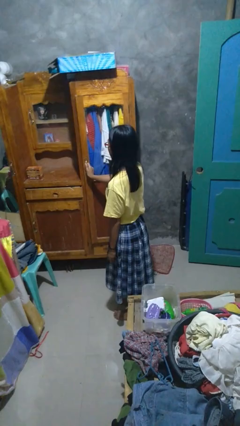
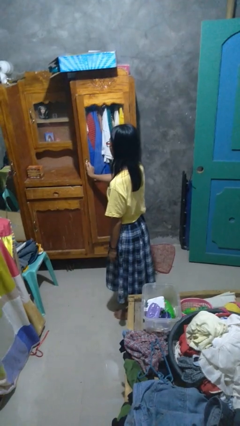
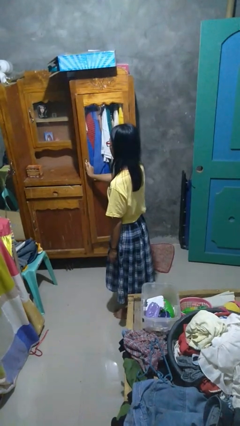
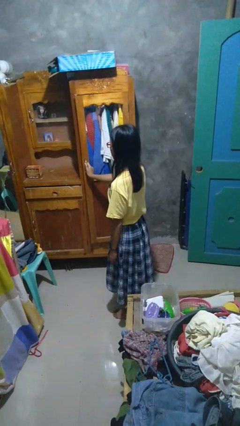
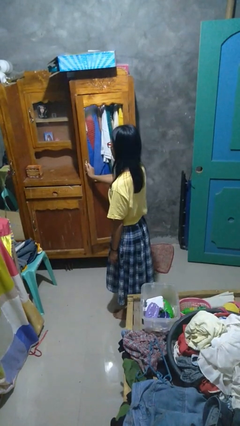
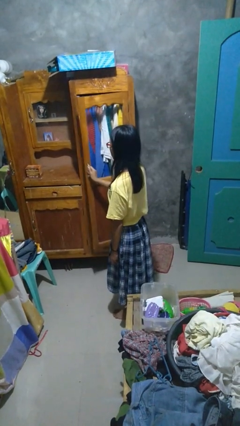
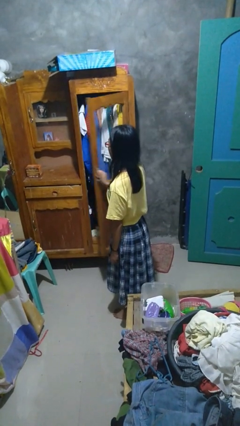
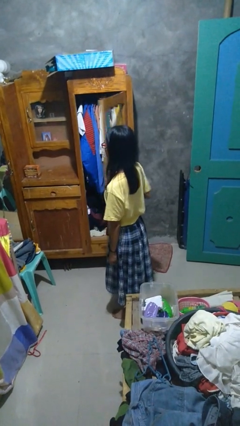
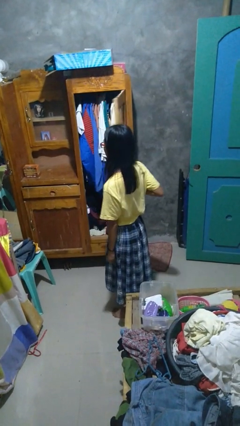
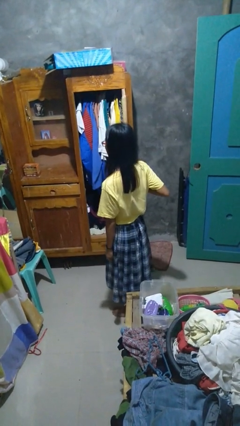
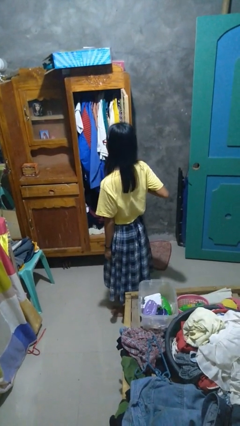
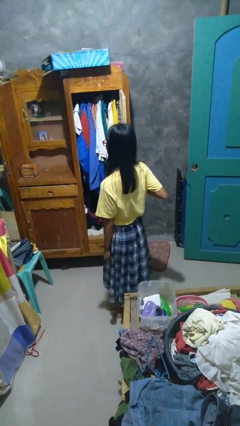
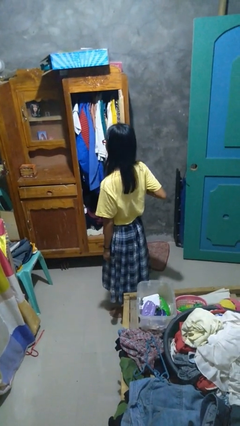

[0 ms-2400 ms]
person opens closet door

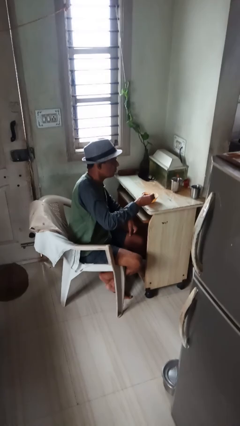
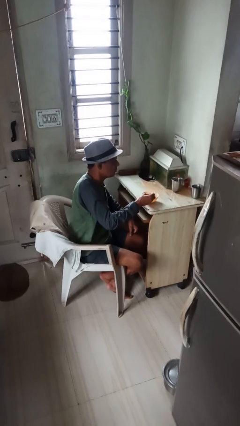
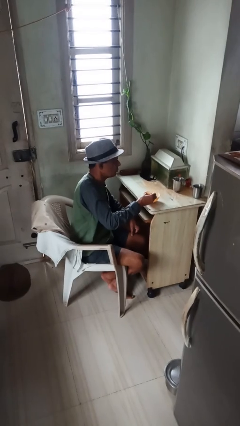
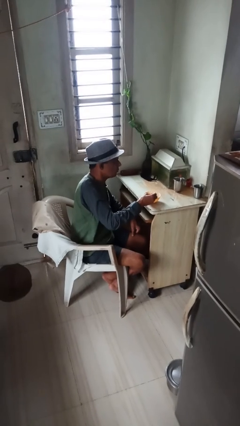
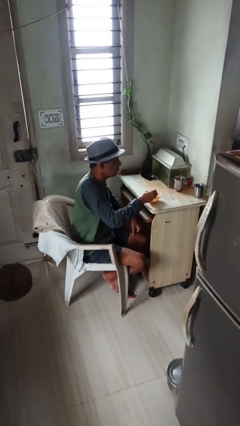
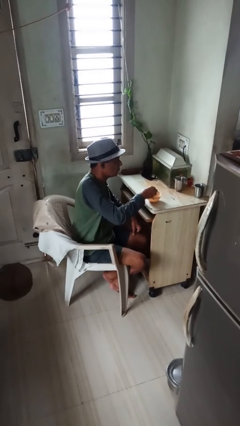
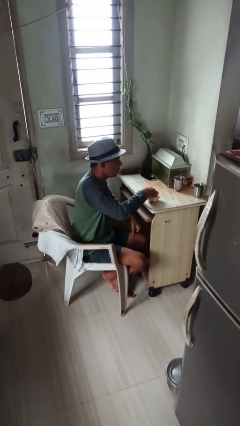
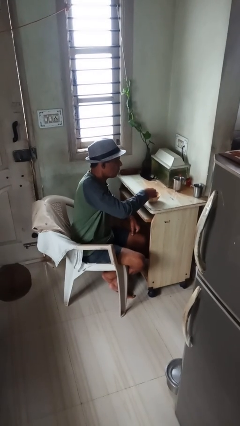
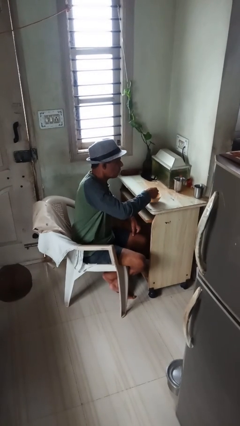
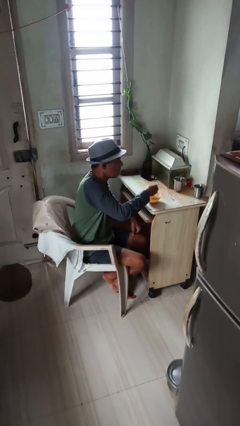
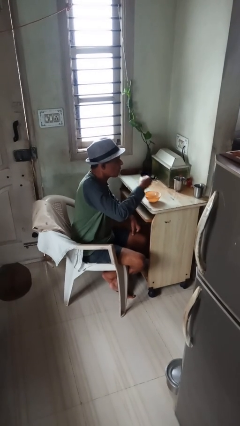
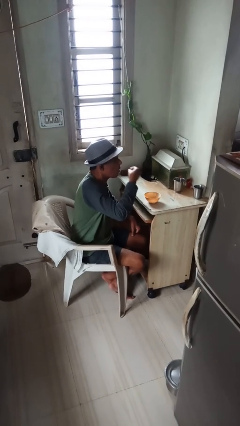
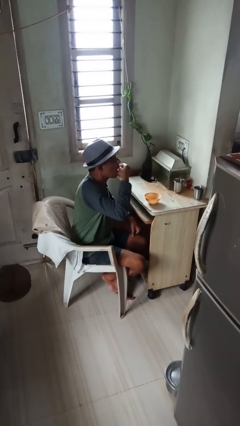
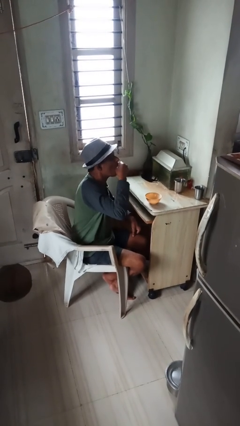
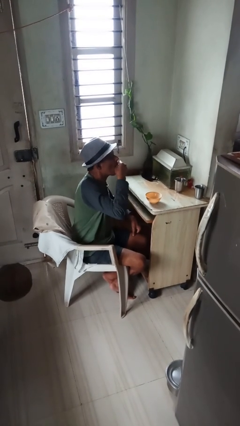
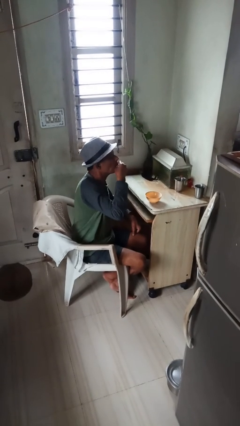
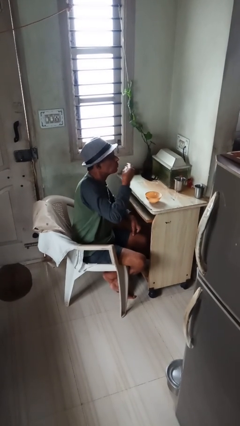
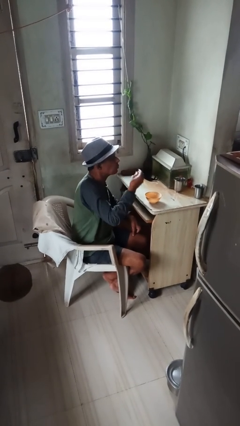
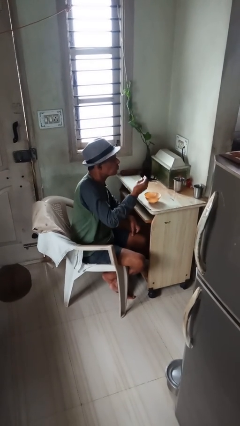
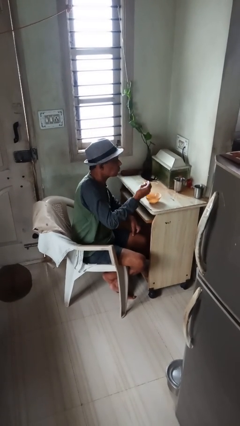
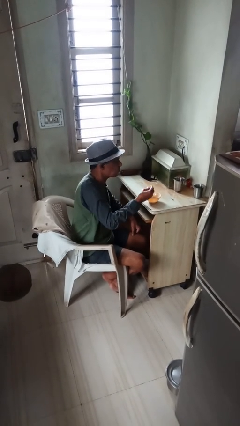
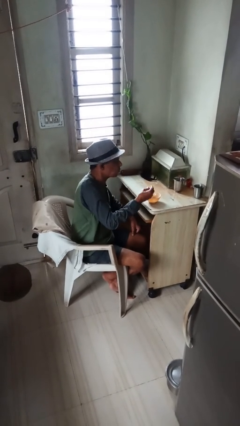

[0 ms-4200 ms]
person eats with hands

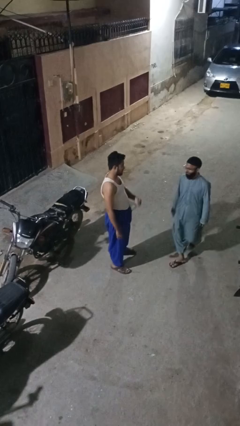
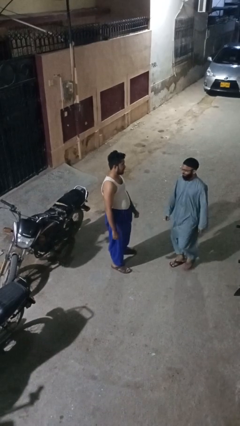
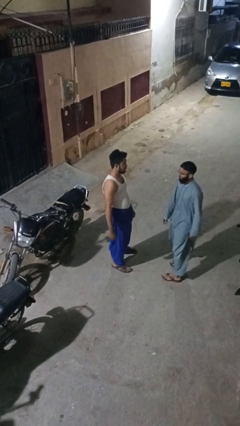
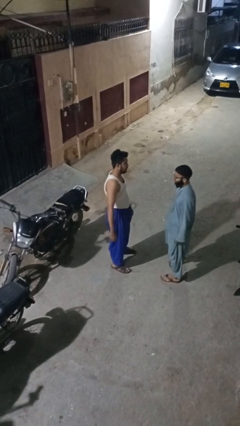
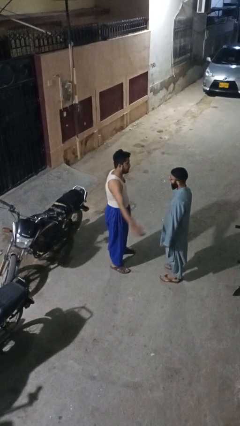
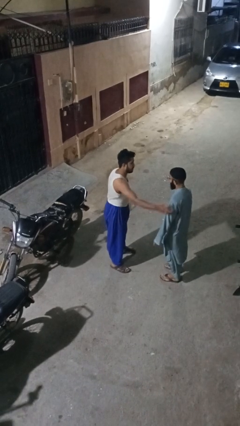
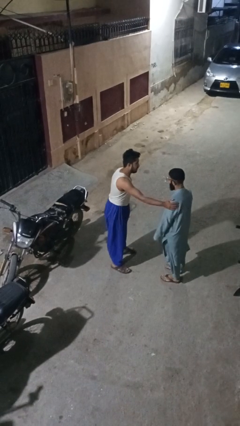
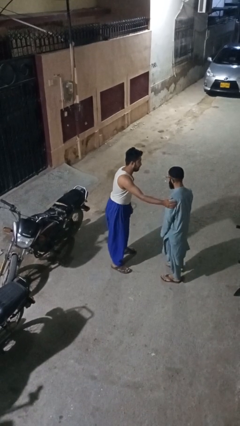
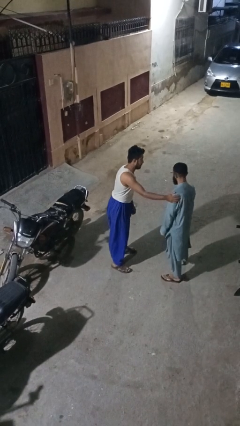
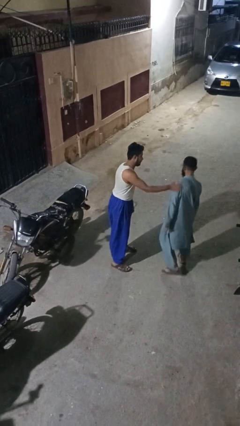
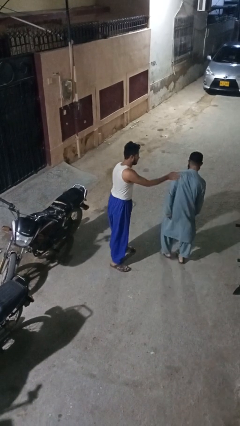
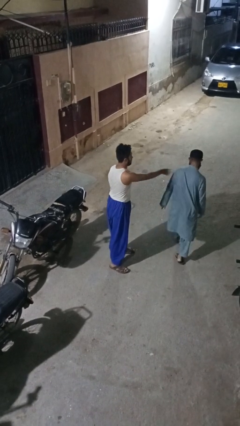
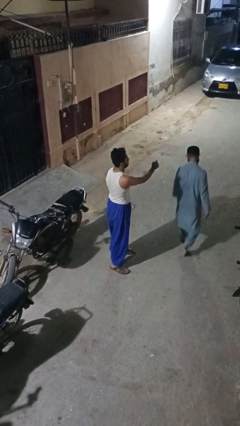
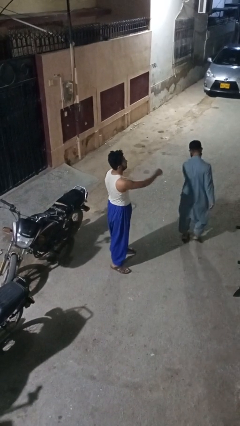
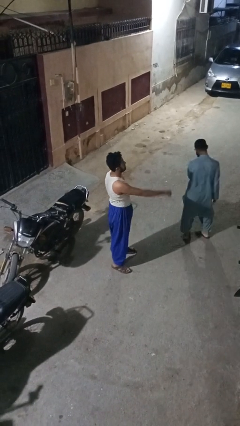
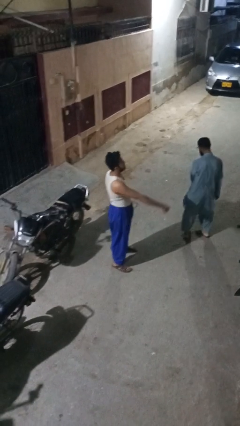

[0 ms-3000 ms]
person shoves person

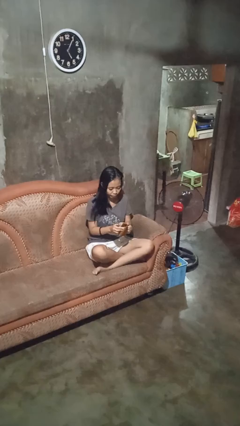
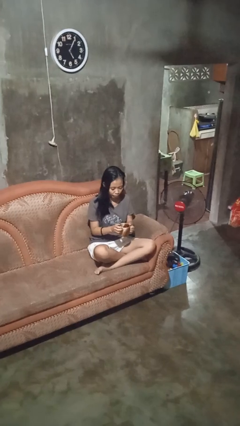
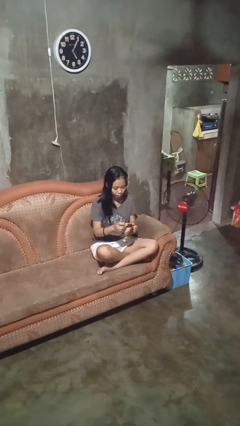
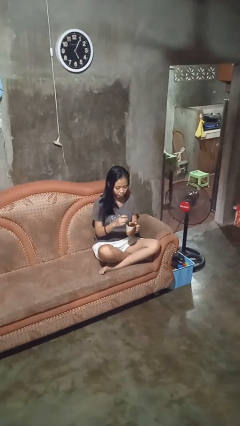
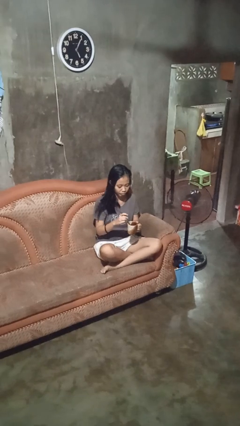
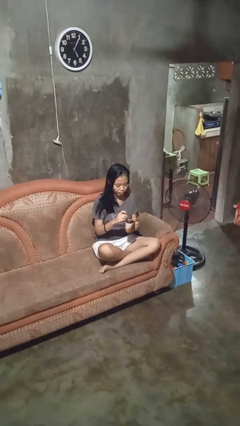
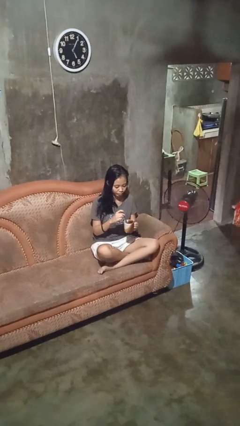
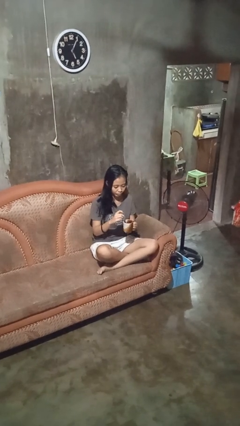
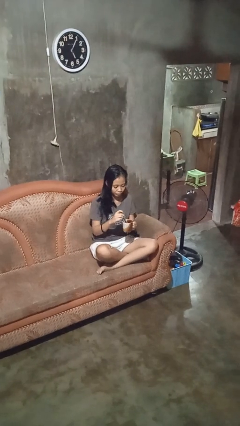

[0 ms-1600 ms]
person stirs mug

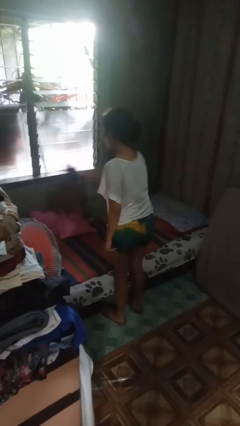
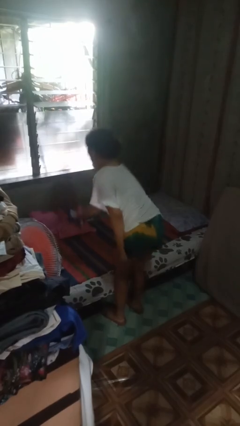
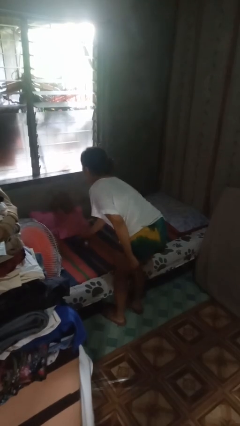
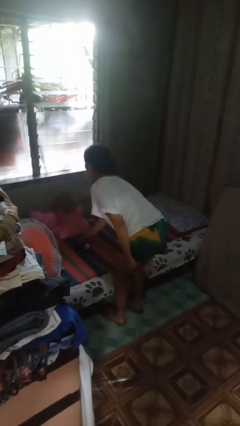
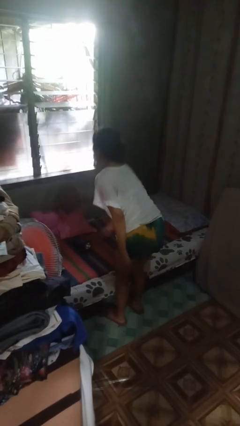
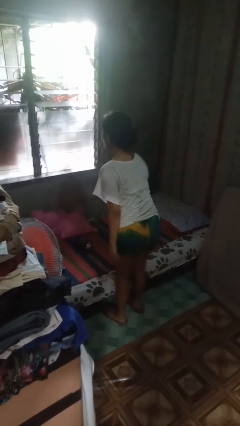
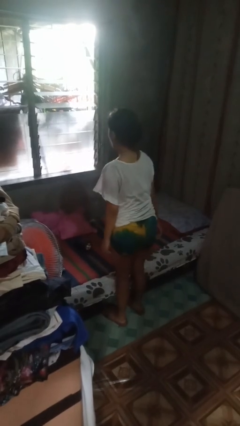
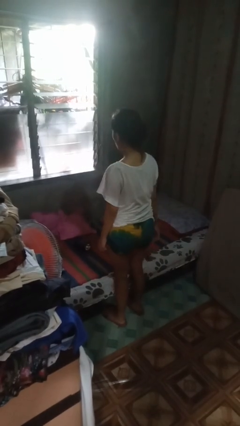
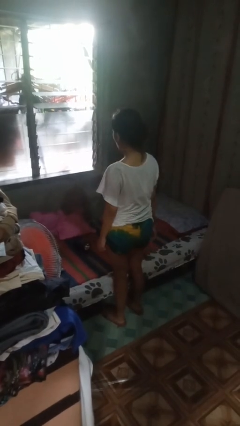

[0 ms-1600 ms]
person puts down object on bed

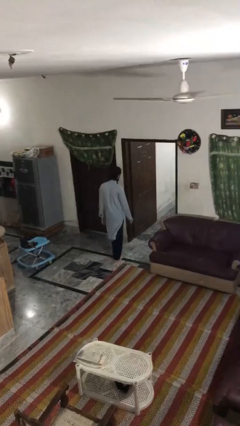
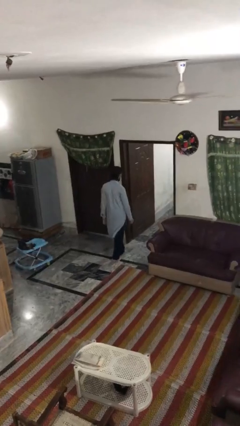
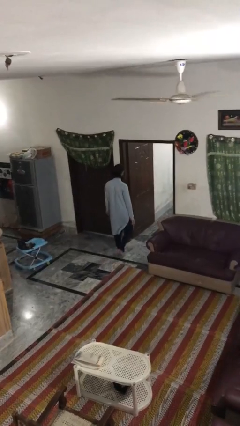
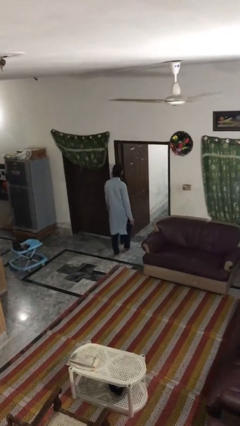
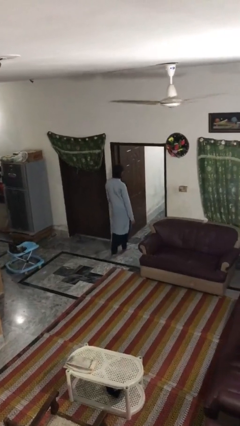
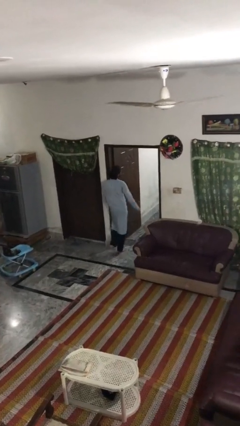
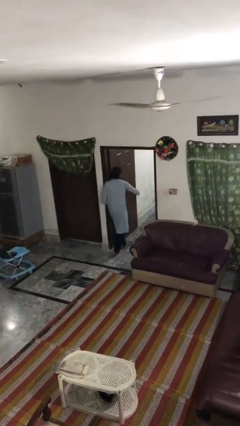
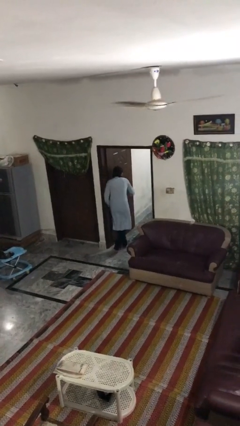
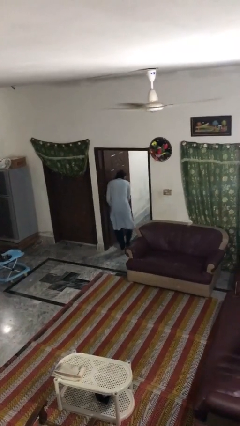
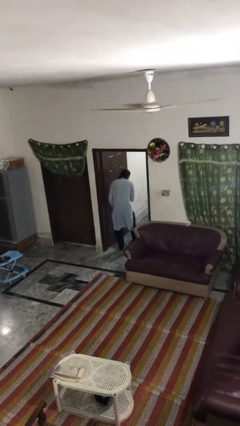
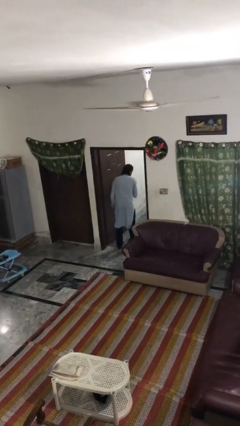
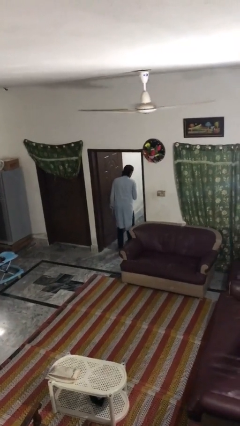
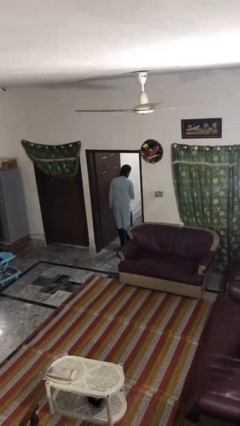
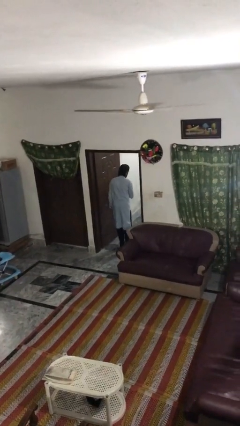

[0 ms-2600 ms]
person bumps into wall

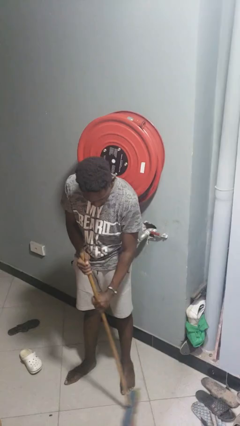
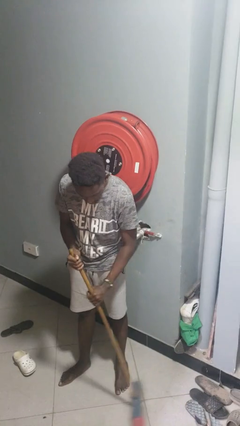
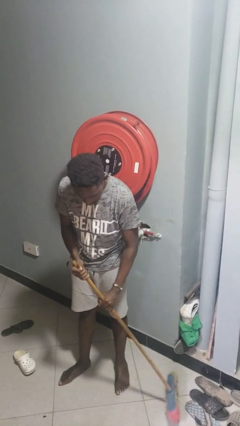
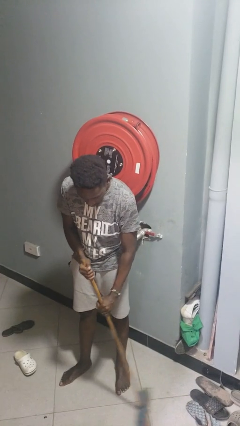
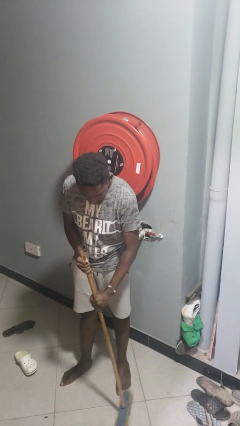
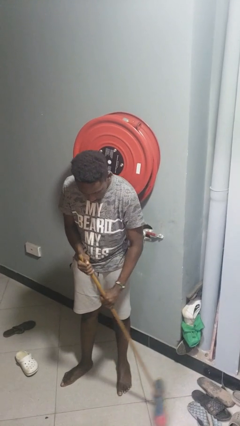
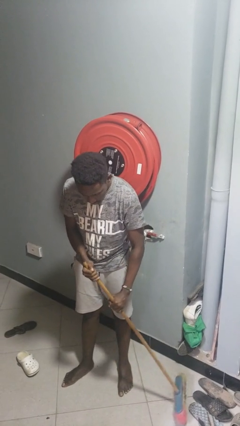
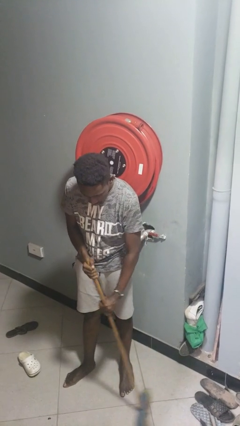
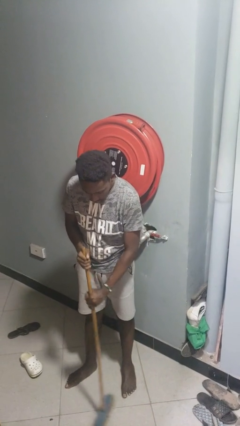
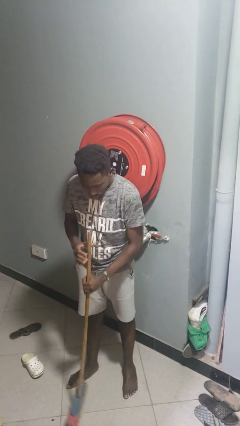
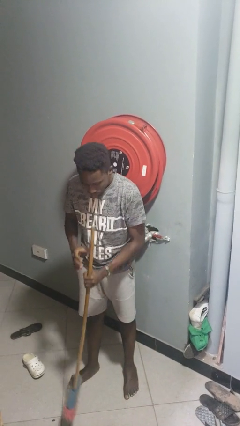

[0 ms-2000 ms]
person sweeps floor
